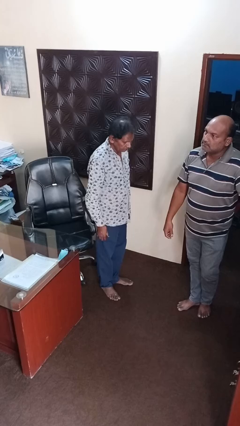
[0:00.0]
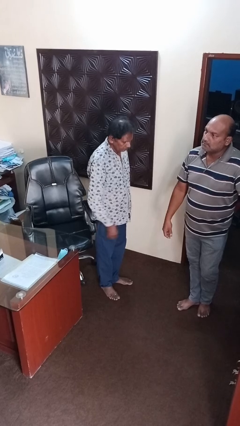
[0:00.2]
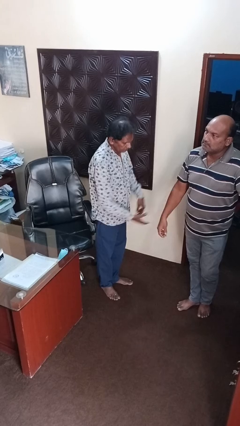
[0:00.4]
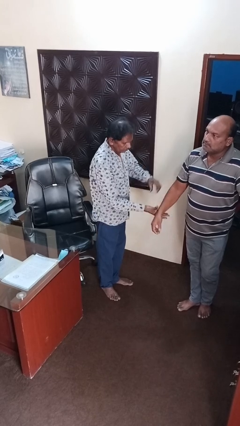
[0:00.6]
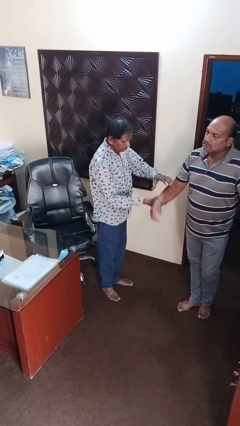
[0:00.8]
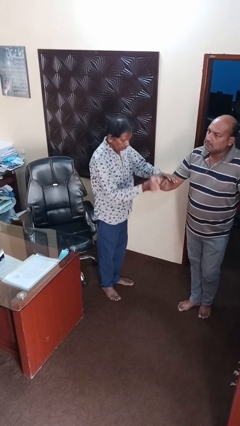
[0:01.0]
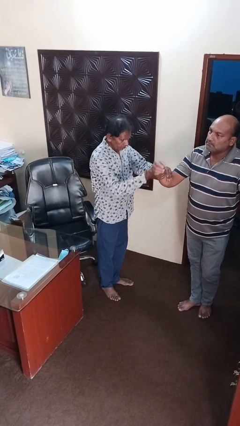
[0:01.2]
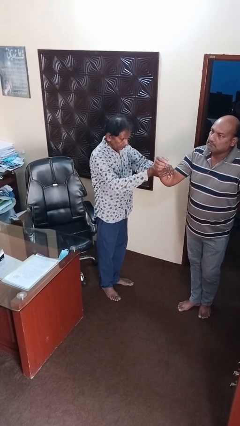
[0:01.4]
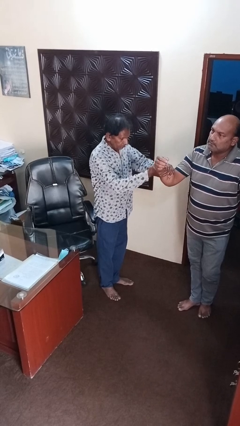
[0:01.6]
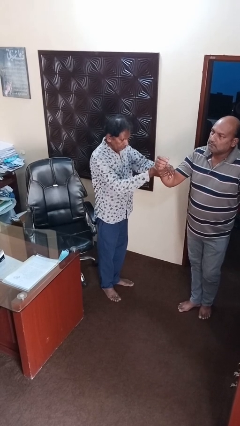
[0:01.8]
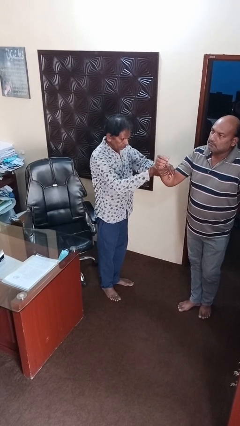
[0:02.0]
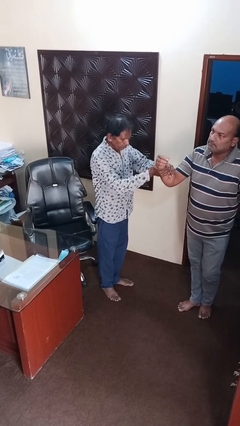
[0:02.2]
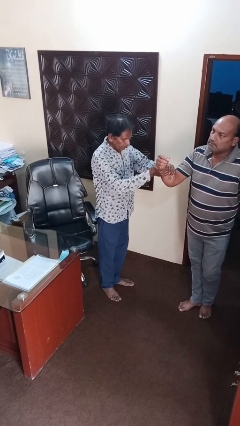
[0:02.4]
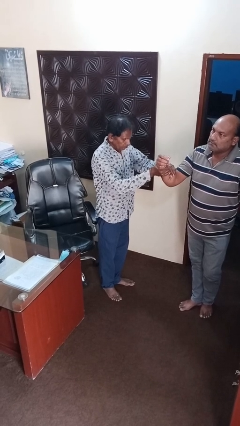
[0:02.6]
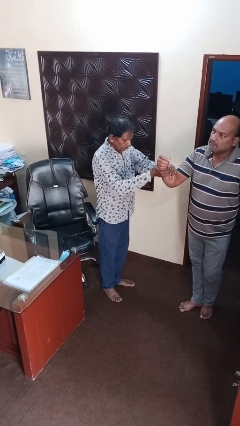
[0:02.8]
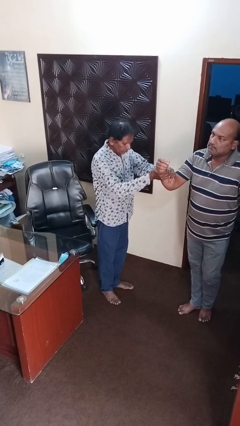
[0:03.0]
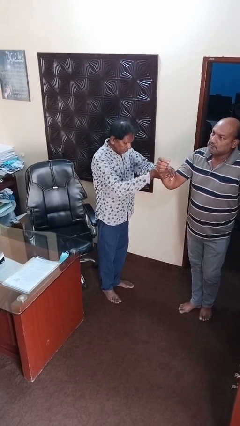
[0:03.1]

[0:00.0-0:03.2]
person grabs person by forearm

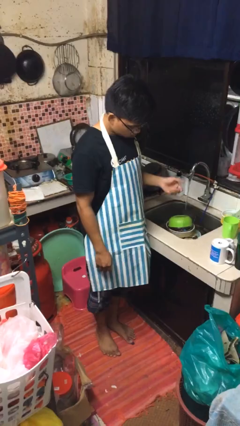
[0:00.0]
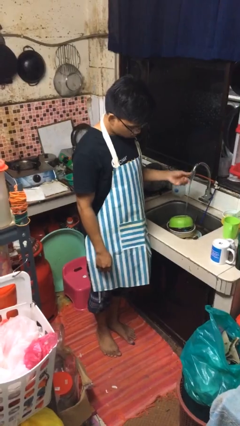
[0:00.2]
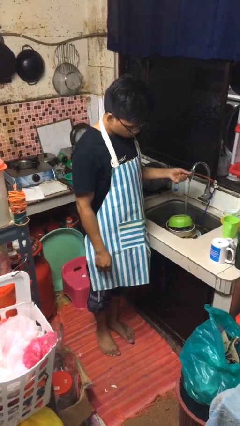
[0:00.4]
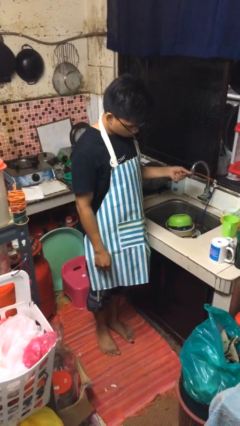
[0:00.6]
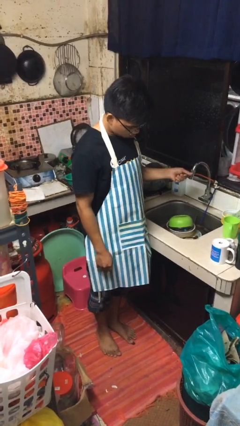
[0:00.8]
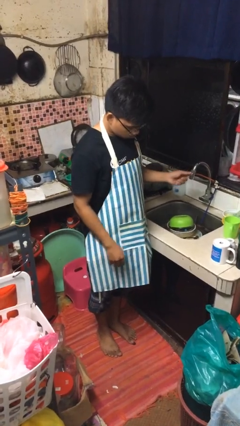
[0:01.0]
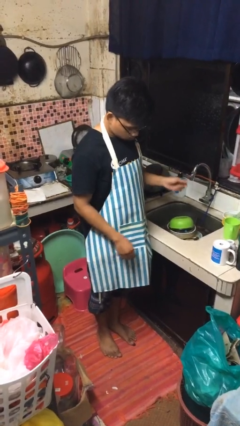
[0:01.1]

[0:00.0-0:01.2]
person turns off faucet

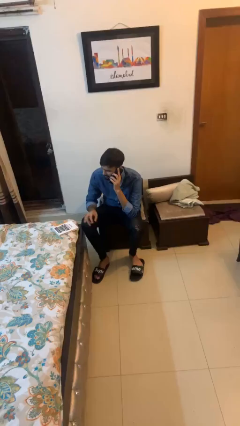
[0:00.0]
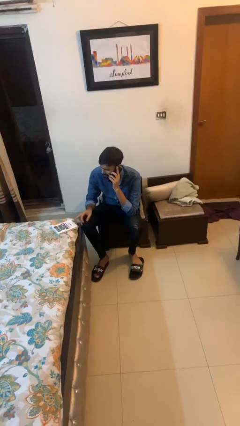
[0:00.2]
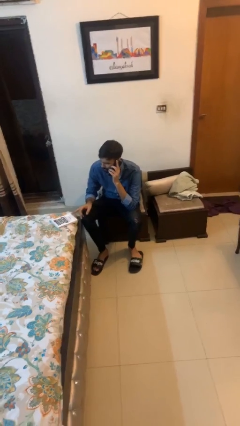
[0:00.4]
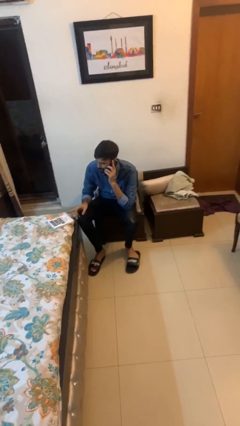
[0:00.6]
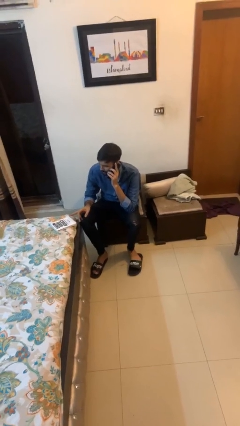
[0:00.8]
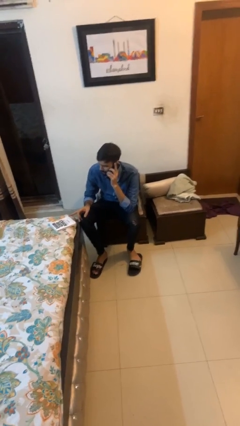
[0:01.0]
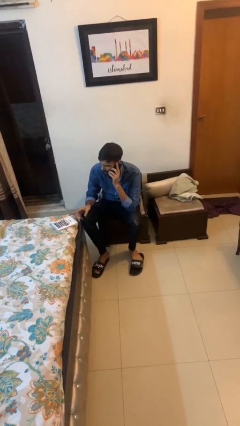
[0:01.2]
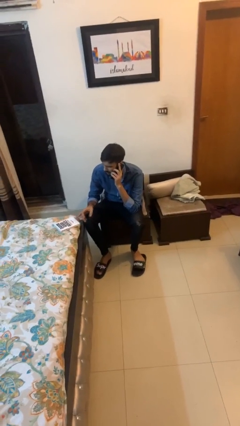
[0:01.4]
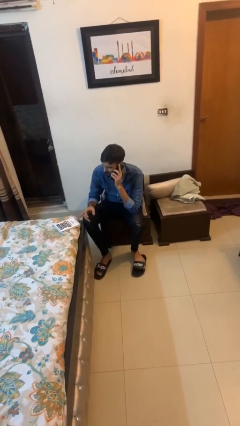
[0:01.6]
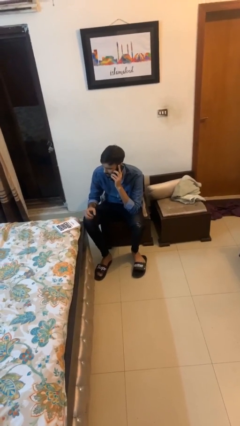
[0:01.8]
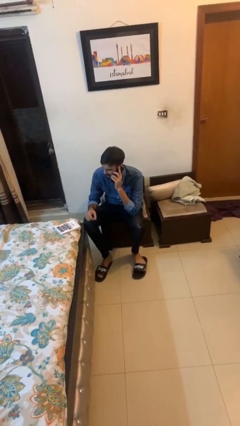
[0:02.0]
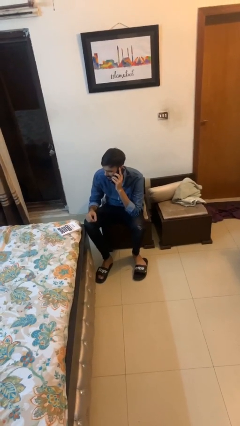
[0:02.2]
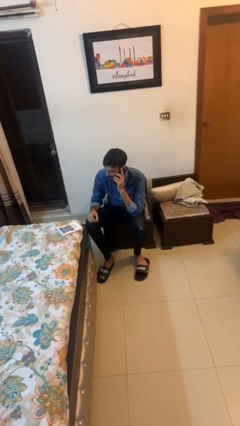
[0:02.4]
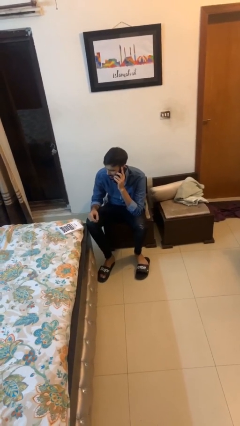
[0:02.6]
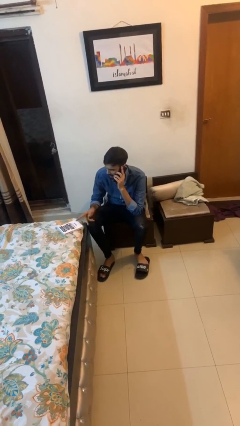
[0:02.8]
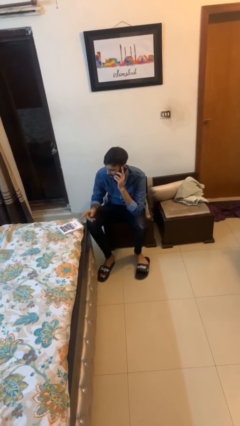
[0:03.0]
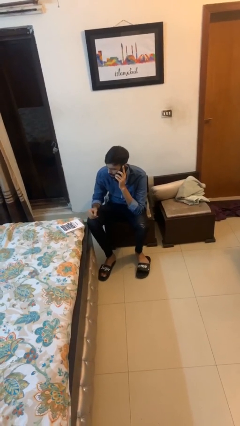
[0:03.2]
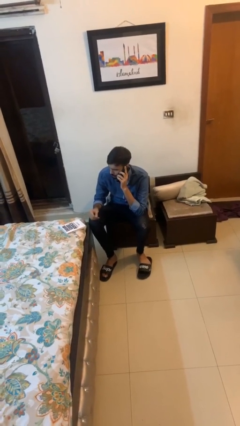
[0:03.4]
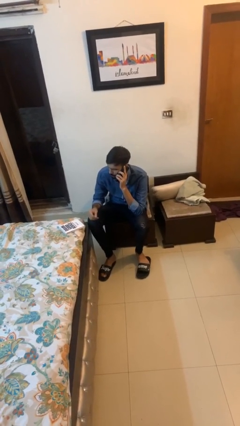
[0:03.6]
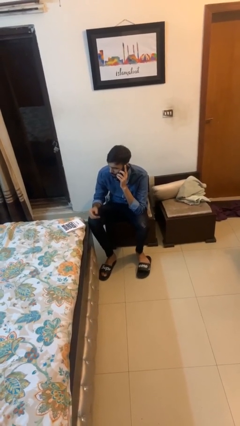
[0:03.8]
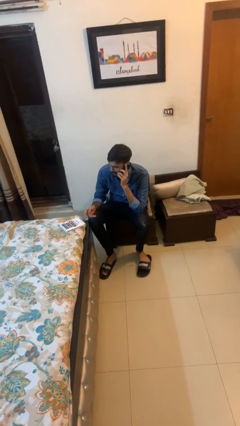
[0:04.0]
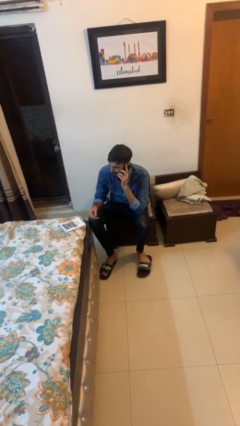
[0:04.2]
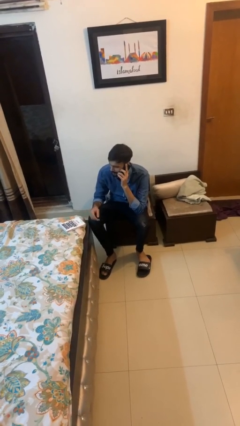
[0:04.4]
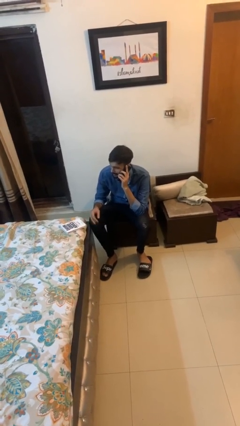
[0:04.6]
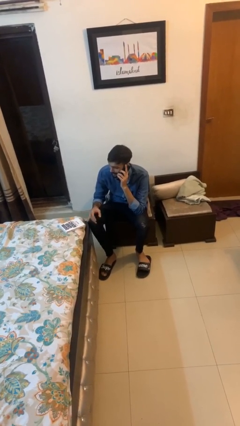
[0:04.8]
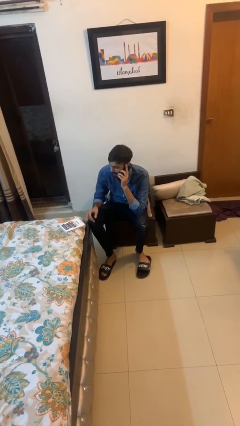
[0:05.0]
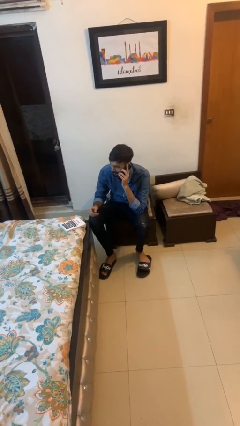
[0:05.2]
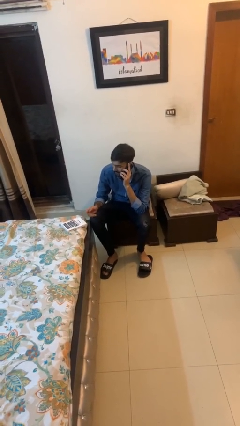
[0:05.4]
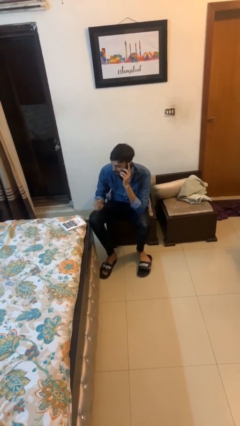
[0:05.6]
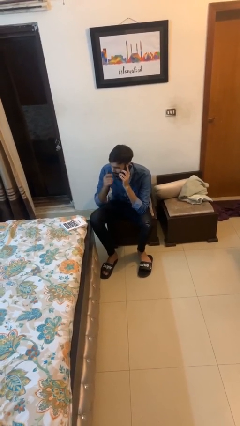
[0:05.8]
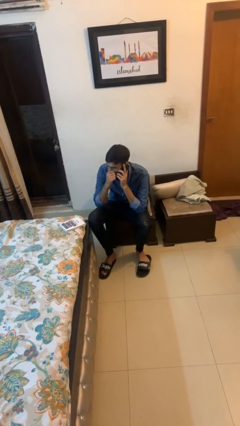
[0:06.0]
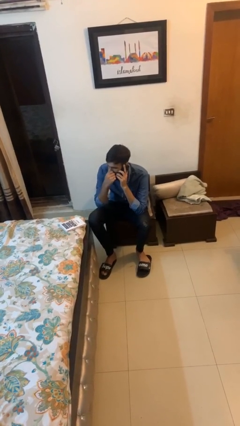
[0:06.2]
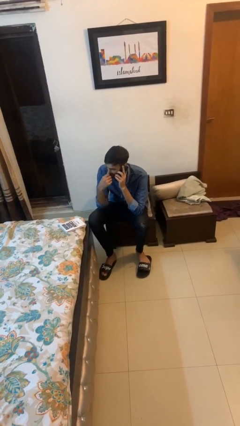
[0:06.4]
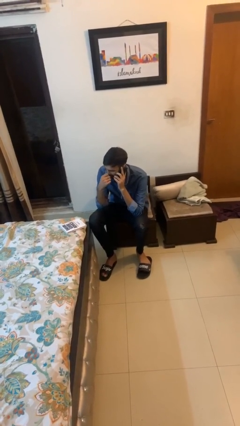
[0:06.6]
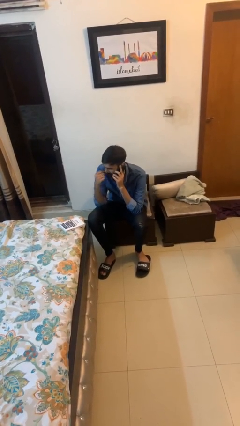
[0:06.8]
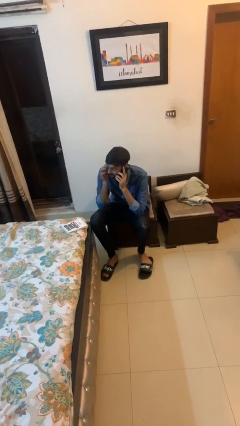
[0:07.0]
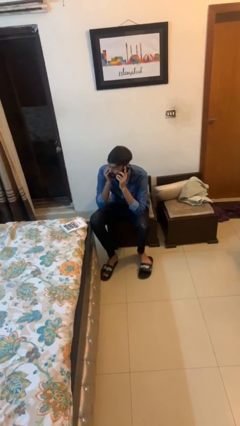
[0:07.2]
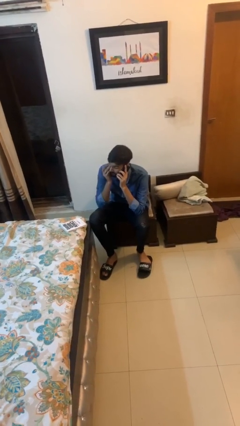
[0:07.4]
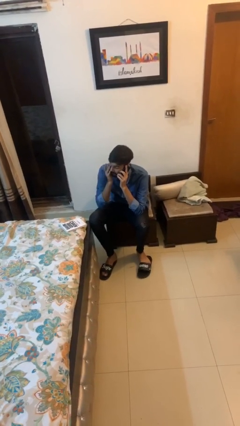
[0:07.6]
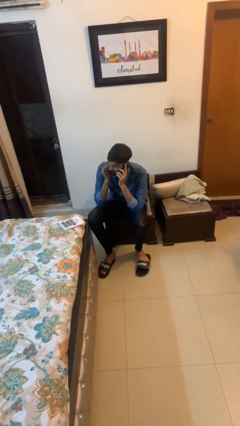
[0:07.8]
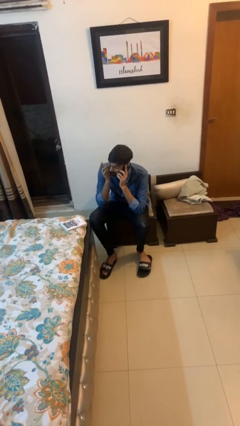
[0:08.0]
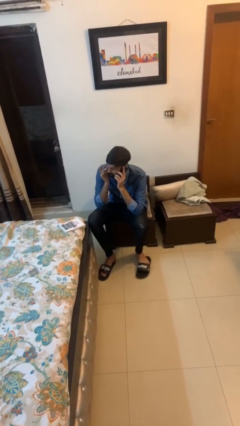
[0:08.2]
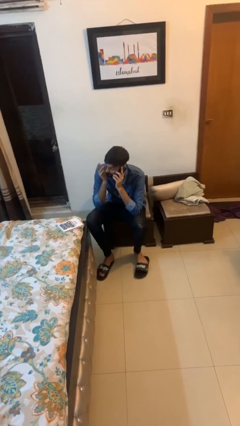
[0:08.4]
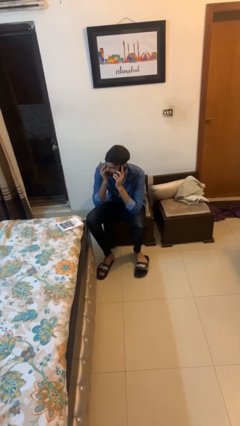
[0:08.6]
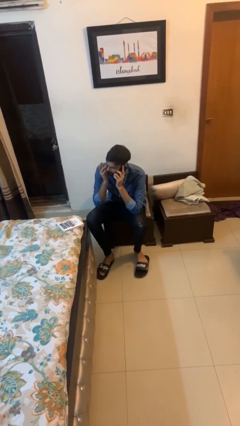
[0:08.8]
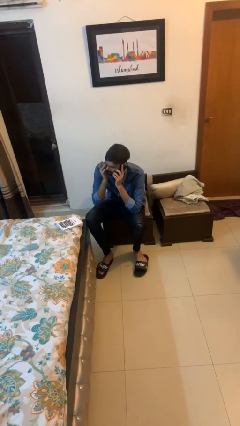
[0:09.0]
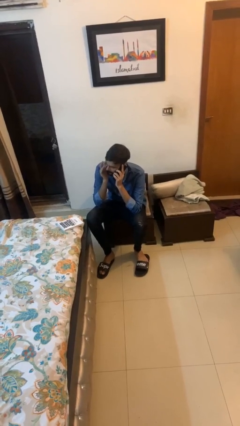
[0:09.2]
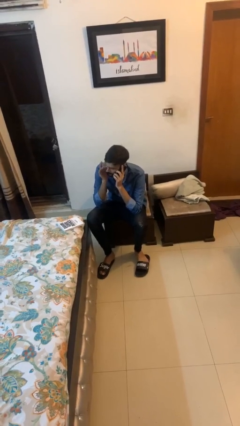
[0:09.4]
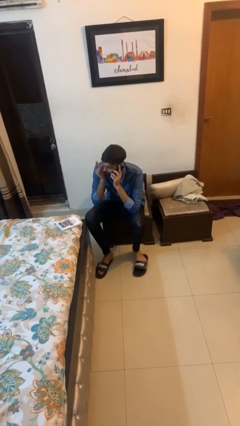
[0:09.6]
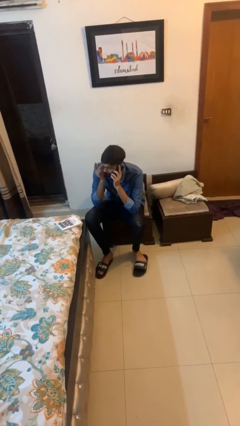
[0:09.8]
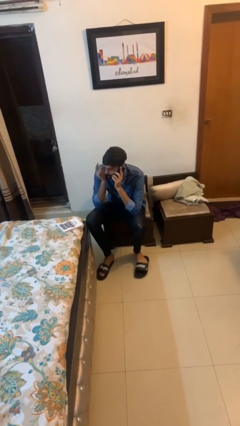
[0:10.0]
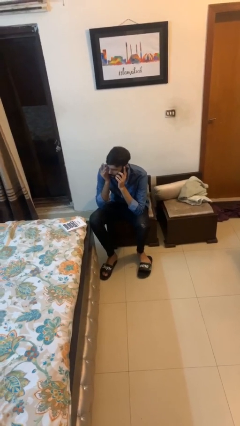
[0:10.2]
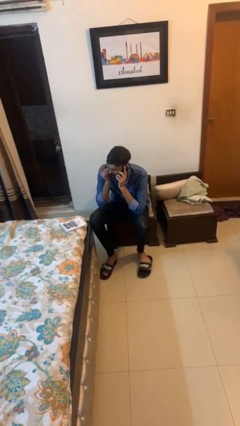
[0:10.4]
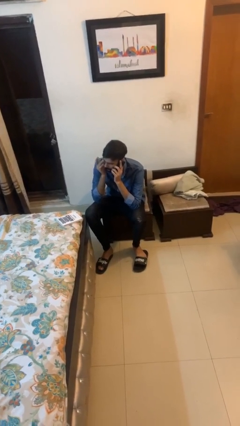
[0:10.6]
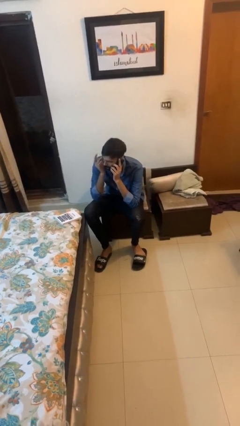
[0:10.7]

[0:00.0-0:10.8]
person talks on phone

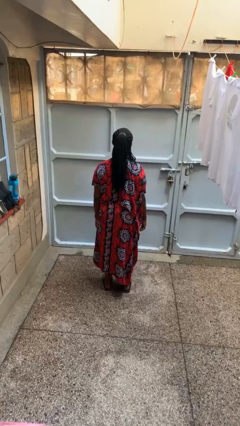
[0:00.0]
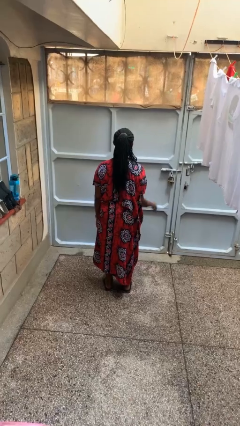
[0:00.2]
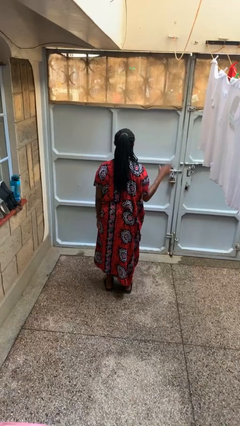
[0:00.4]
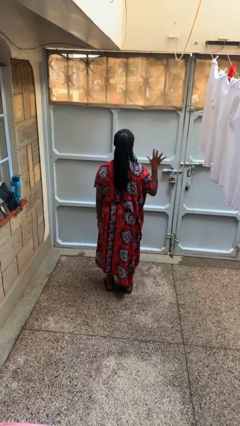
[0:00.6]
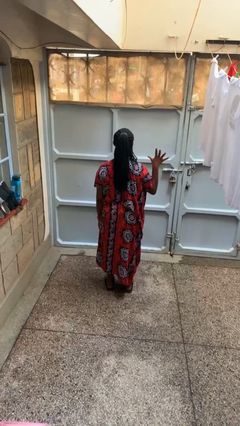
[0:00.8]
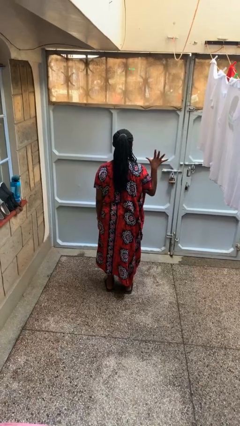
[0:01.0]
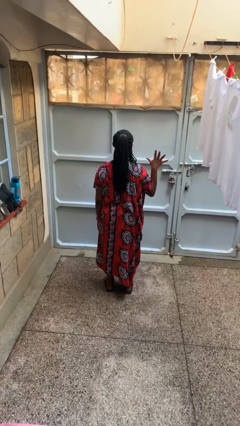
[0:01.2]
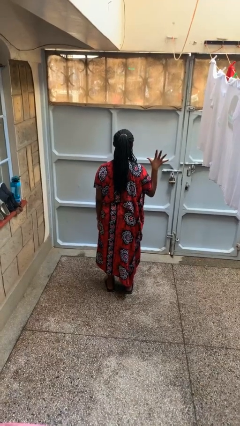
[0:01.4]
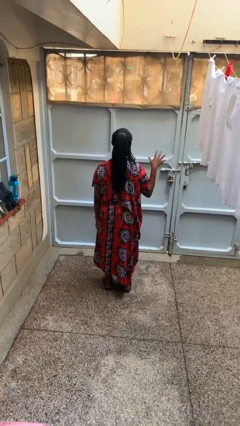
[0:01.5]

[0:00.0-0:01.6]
person gestures number five

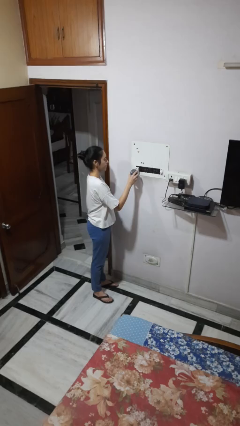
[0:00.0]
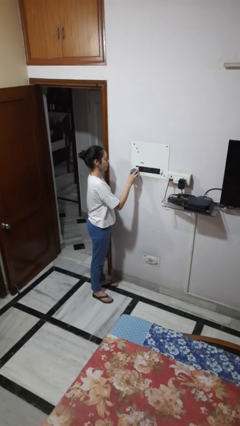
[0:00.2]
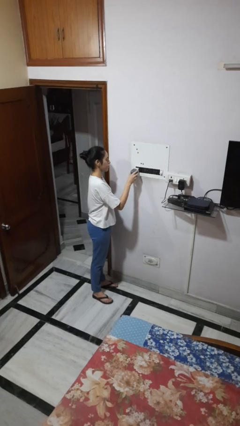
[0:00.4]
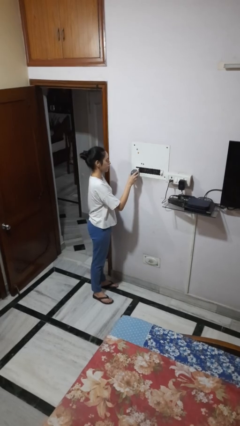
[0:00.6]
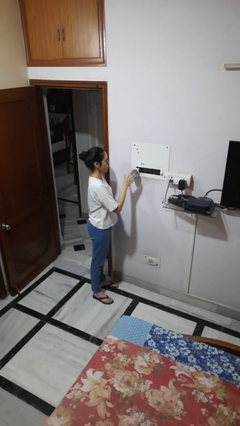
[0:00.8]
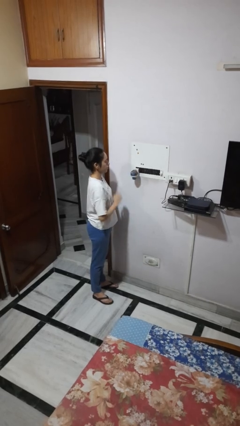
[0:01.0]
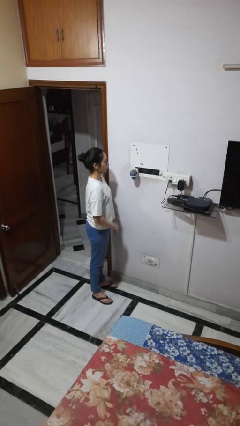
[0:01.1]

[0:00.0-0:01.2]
person plugs into electrical socket
